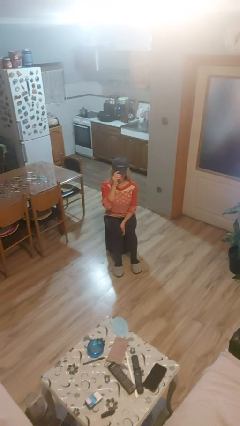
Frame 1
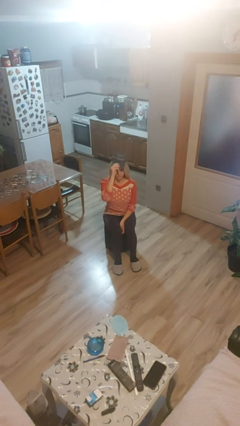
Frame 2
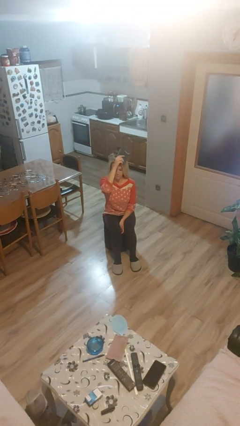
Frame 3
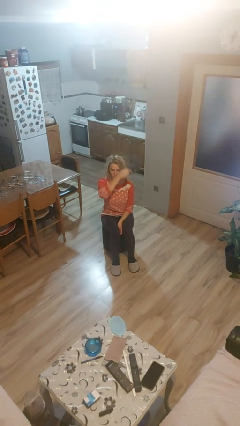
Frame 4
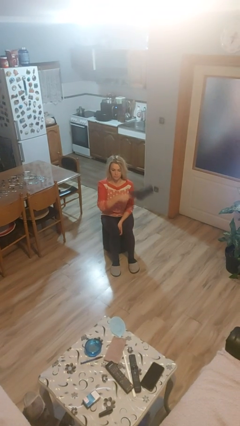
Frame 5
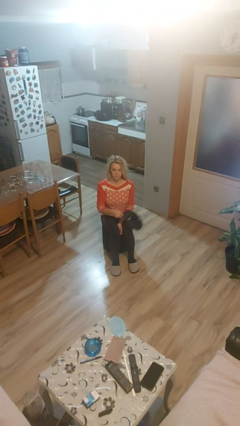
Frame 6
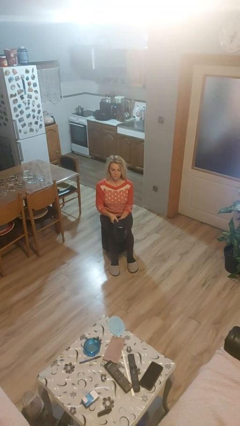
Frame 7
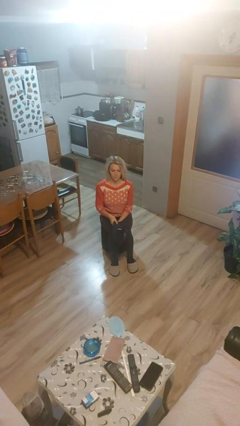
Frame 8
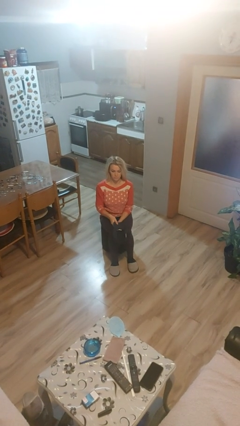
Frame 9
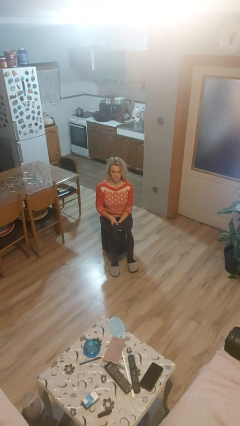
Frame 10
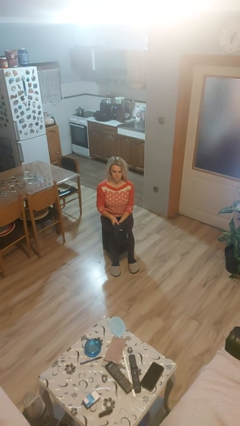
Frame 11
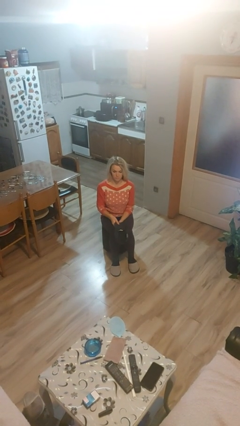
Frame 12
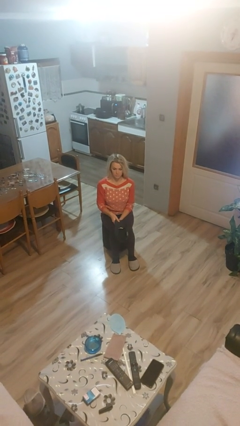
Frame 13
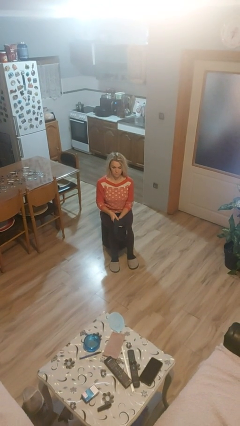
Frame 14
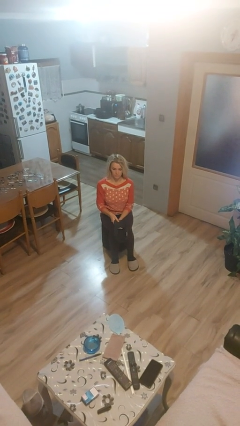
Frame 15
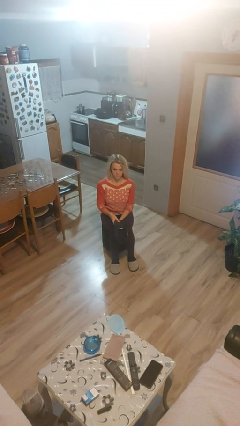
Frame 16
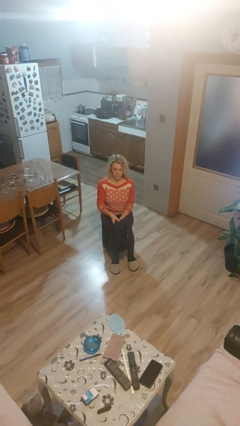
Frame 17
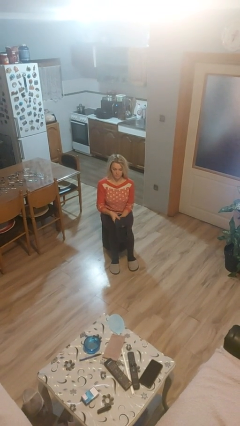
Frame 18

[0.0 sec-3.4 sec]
person takes off hat

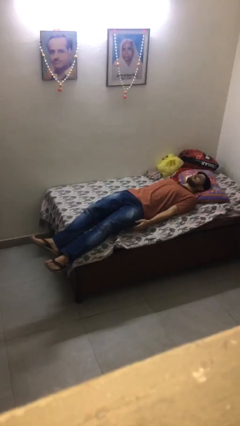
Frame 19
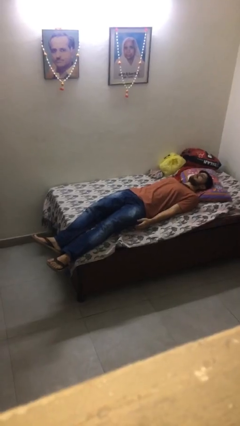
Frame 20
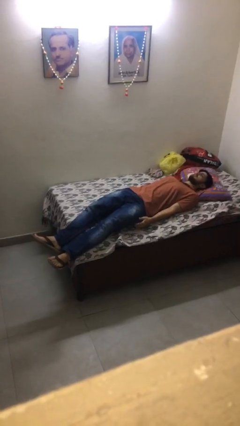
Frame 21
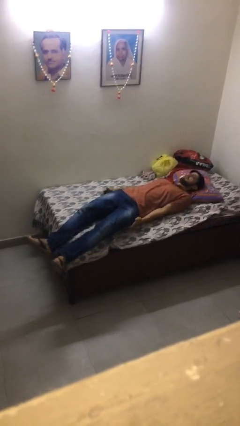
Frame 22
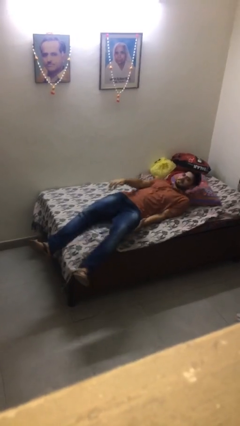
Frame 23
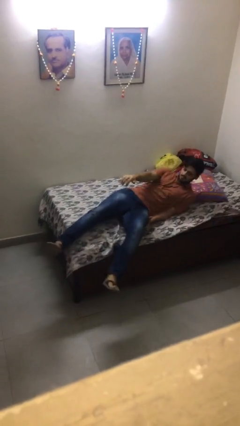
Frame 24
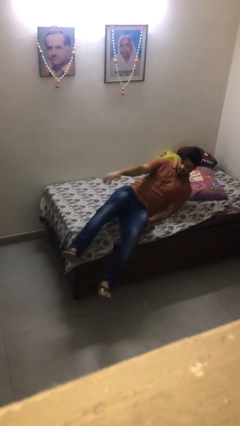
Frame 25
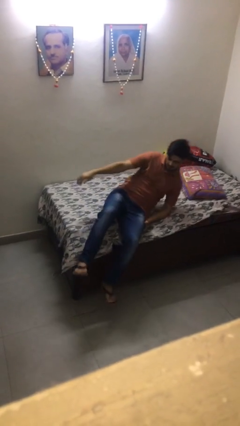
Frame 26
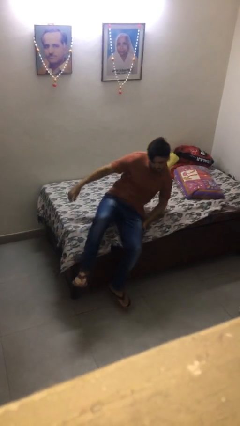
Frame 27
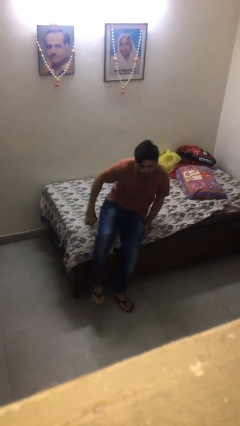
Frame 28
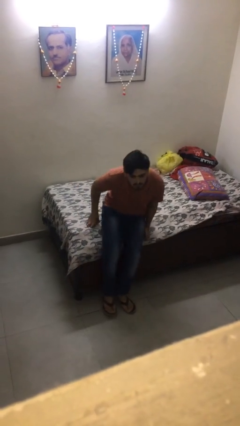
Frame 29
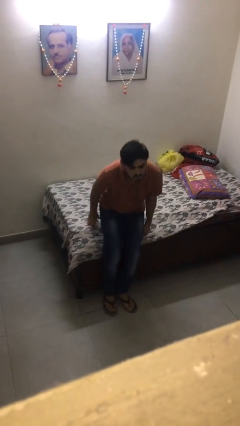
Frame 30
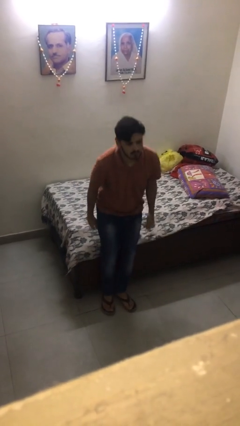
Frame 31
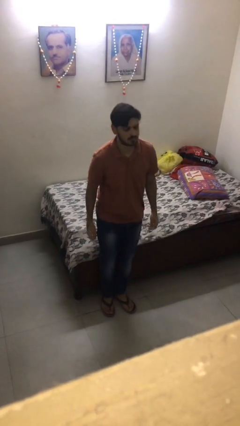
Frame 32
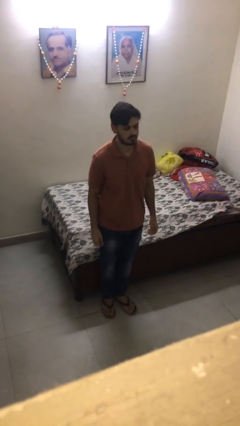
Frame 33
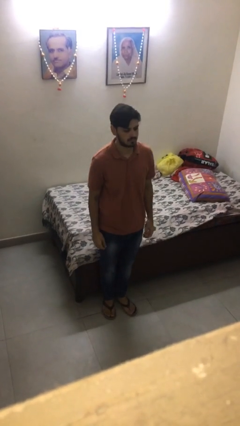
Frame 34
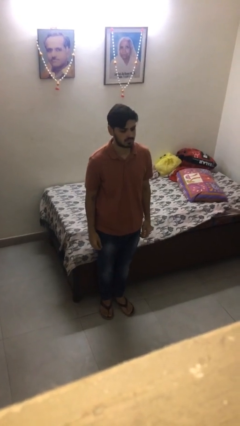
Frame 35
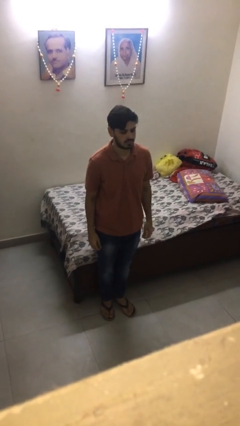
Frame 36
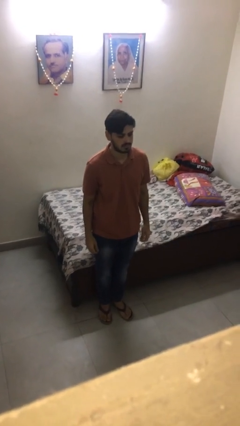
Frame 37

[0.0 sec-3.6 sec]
person stands up

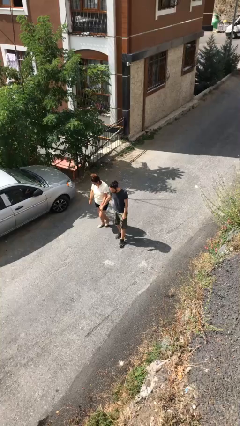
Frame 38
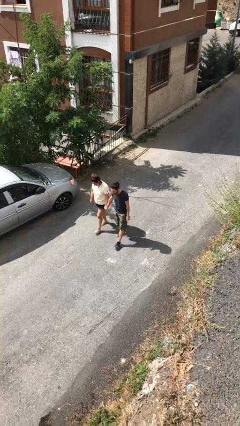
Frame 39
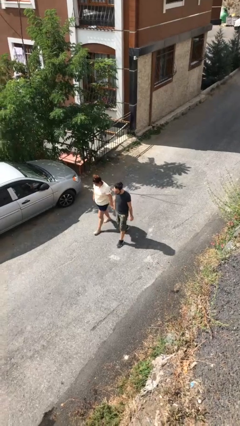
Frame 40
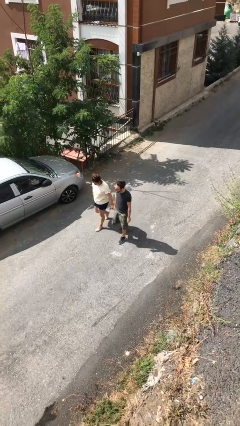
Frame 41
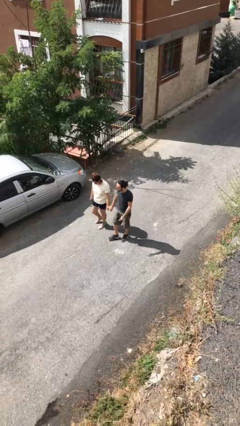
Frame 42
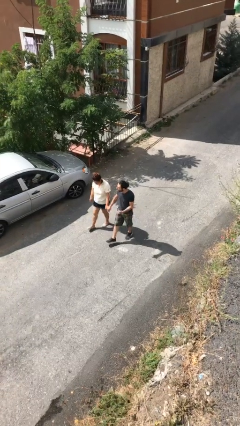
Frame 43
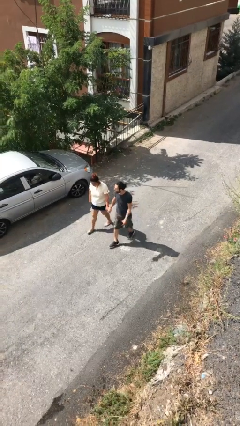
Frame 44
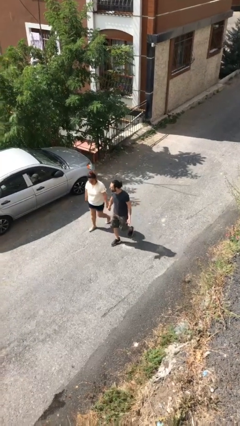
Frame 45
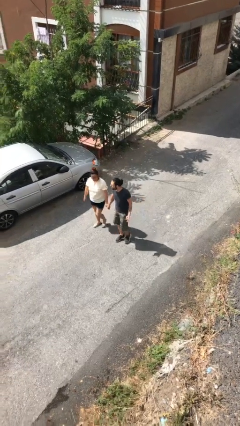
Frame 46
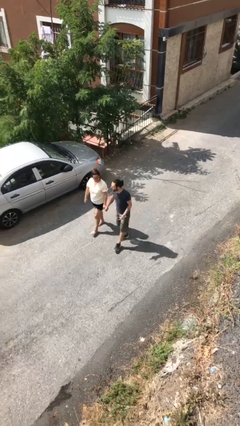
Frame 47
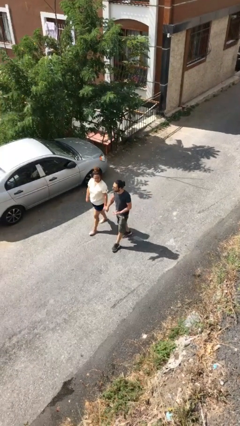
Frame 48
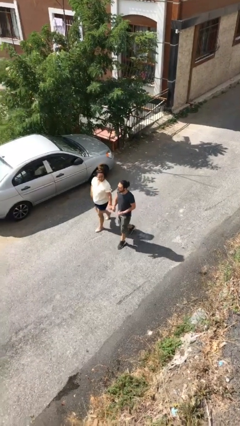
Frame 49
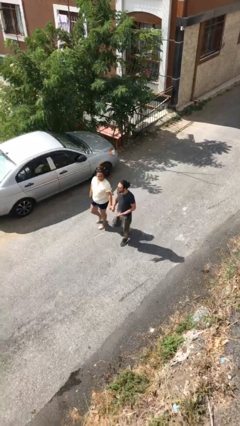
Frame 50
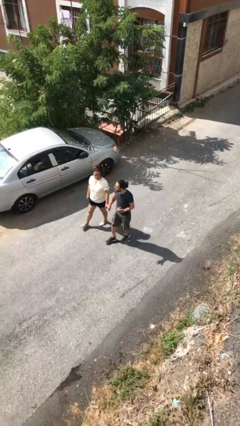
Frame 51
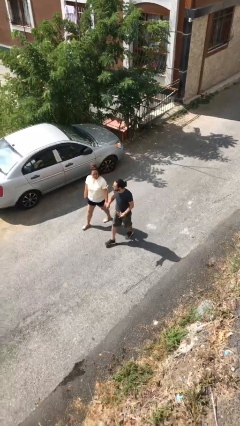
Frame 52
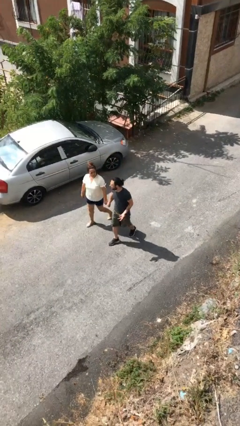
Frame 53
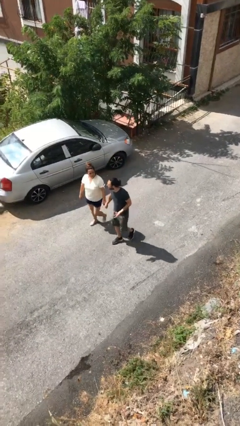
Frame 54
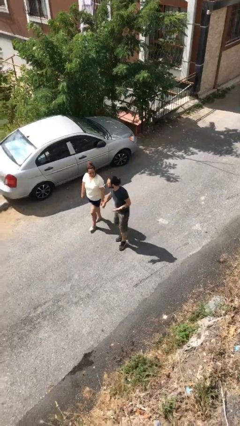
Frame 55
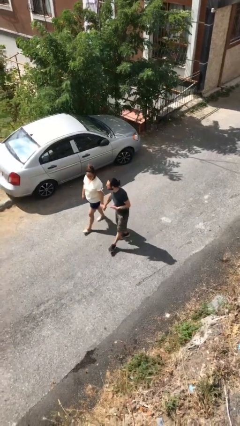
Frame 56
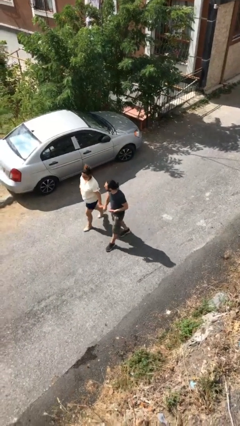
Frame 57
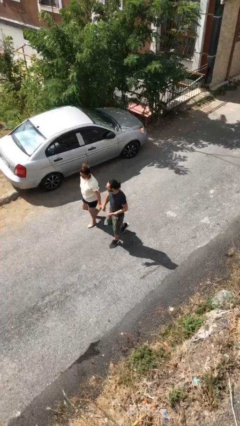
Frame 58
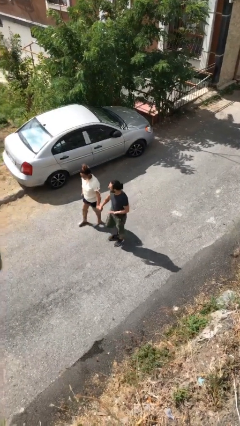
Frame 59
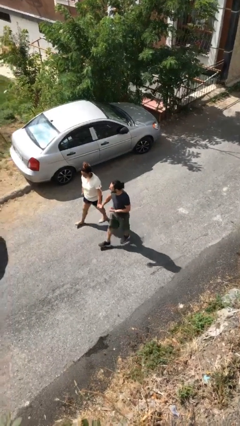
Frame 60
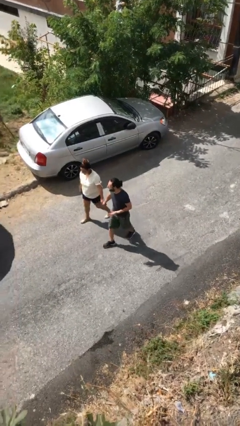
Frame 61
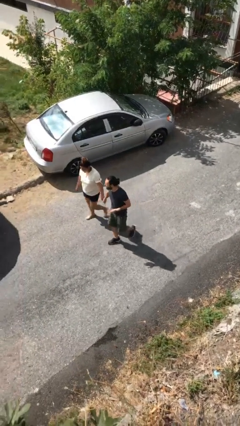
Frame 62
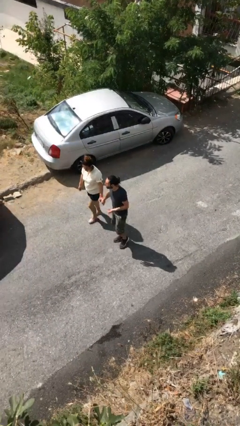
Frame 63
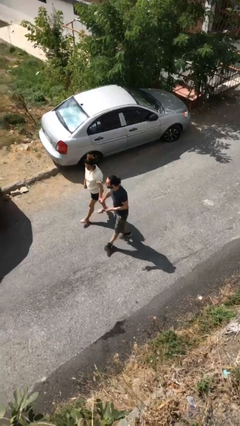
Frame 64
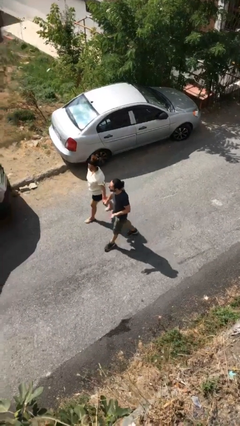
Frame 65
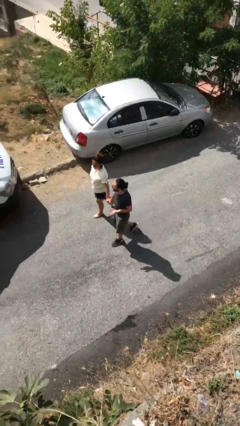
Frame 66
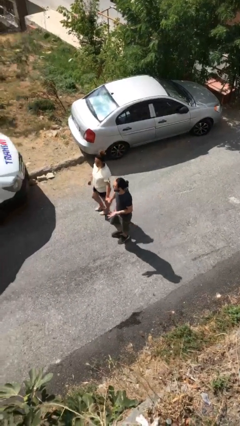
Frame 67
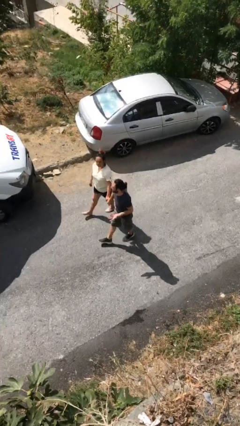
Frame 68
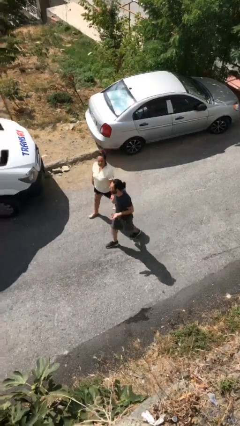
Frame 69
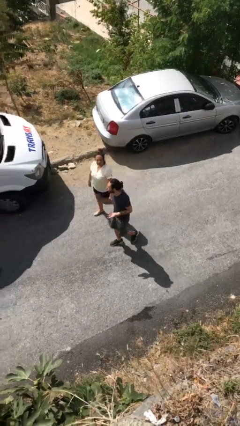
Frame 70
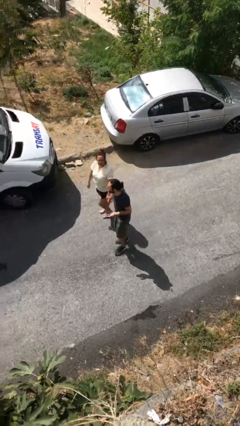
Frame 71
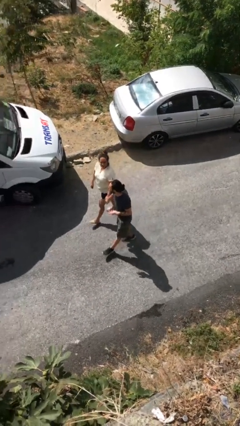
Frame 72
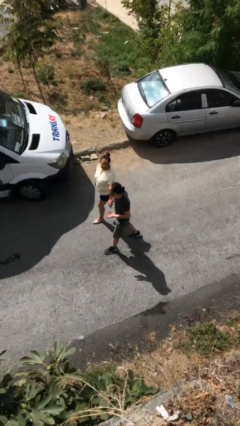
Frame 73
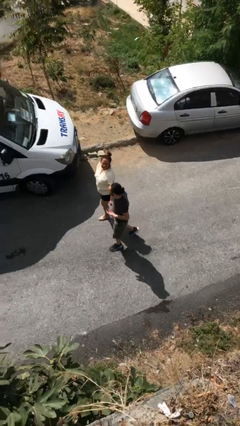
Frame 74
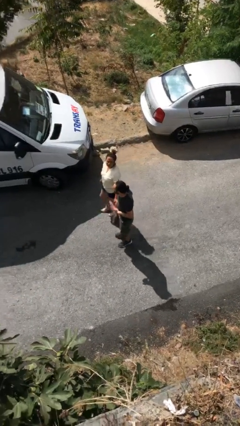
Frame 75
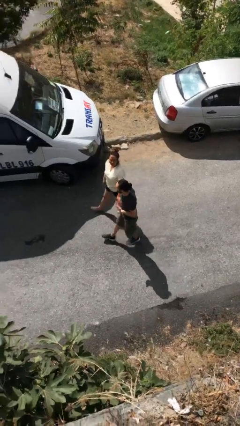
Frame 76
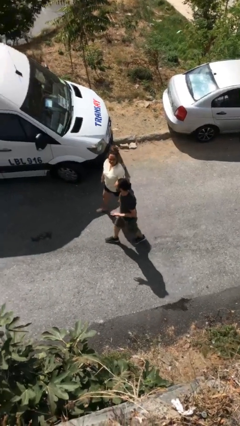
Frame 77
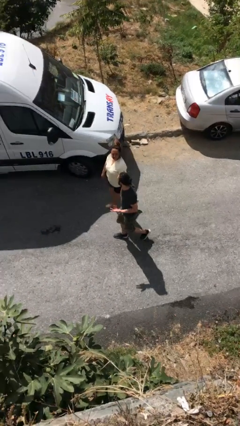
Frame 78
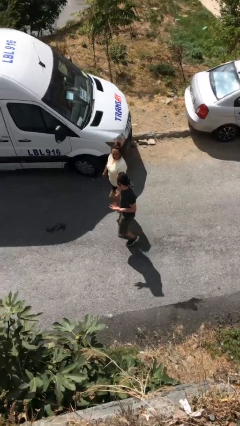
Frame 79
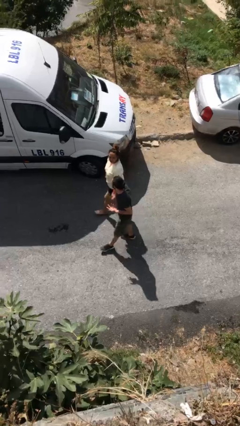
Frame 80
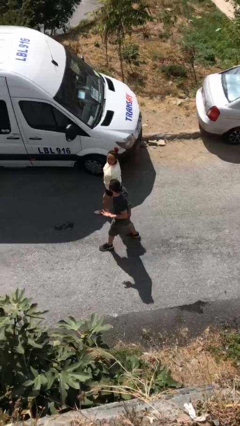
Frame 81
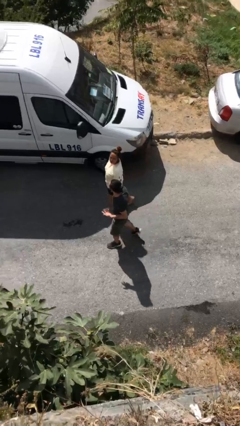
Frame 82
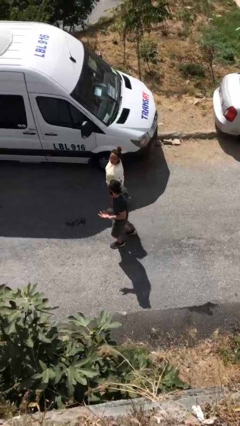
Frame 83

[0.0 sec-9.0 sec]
person holds hand

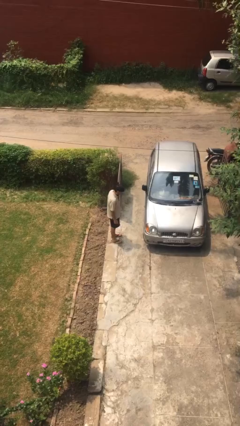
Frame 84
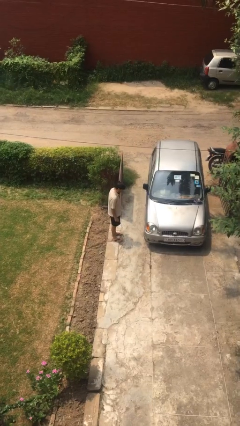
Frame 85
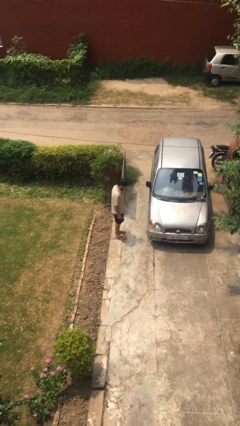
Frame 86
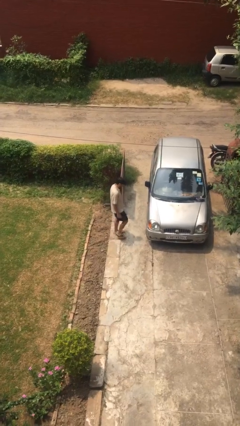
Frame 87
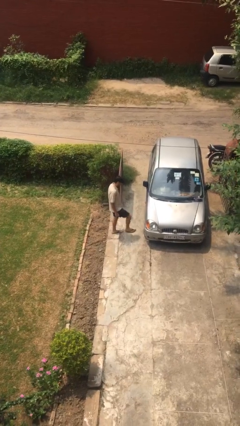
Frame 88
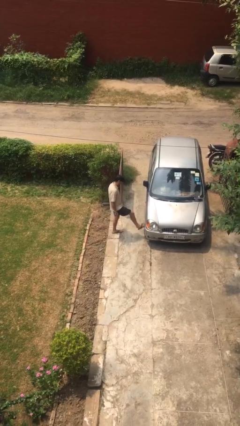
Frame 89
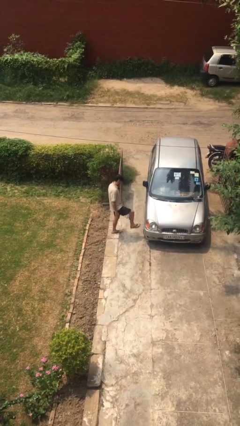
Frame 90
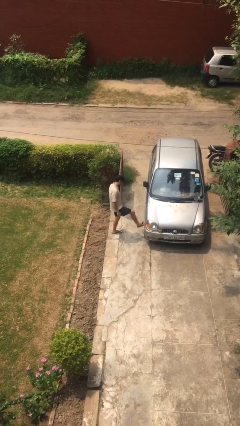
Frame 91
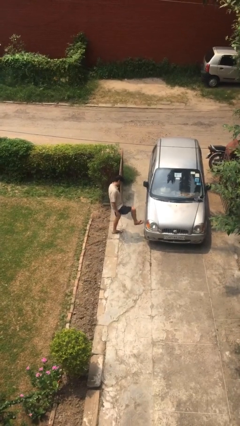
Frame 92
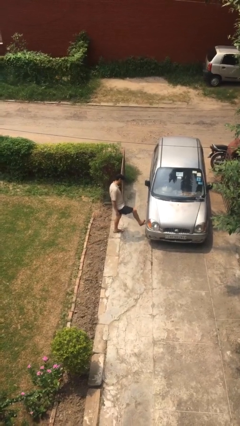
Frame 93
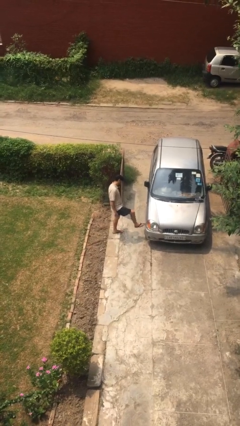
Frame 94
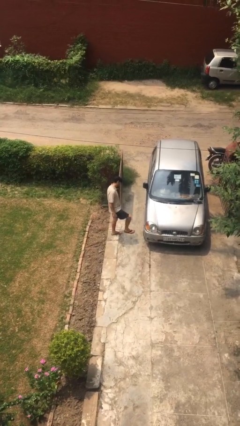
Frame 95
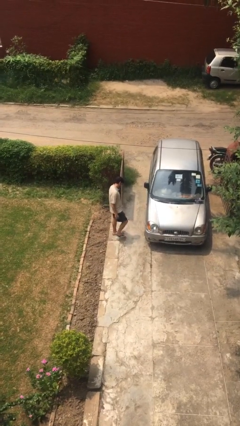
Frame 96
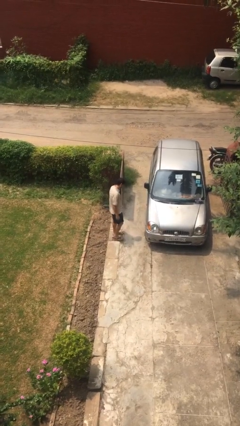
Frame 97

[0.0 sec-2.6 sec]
person kicks car tires
